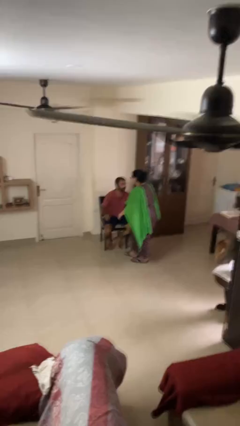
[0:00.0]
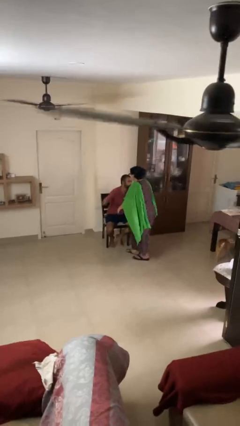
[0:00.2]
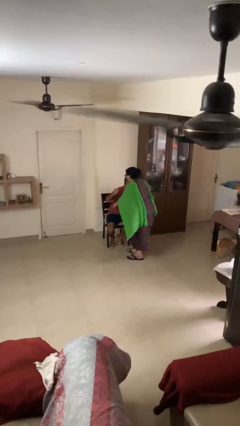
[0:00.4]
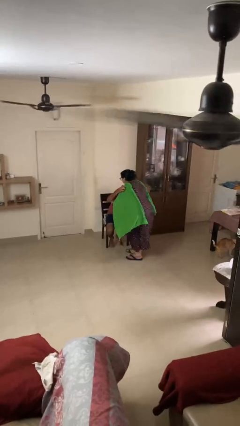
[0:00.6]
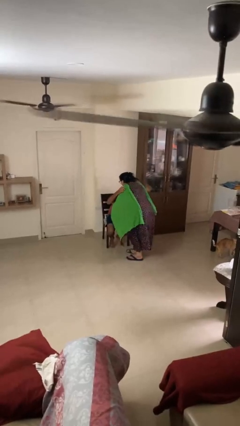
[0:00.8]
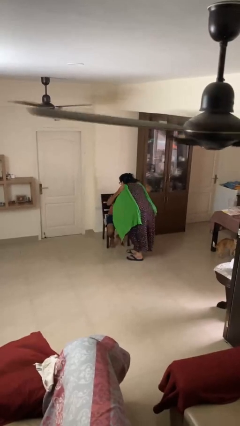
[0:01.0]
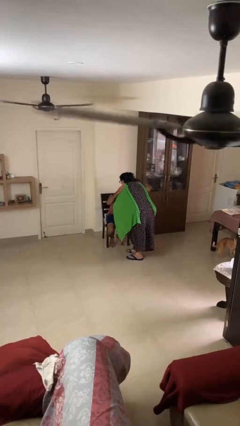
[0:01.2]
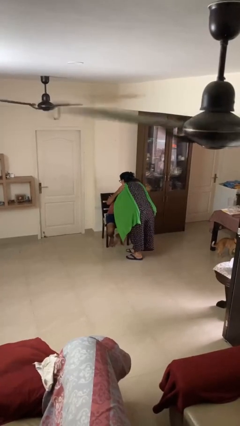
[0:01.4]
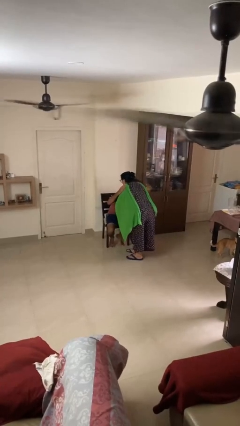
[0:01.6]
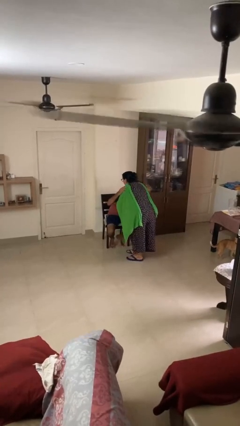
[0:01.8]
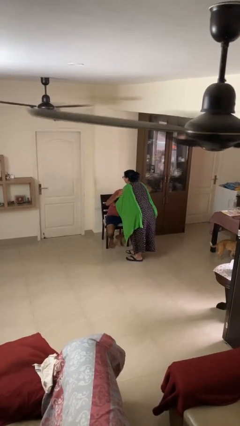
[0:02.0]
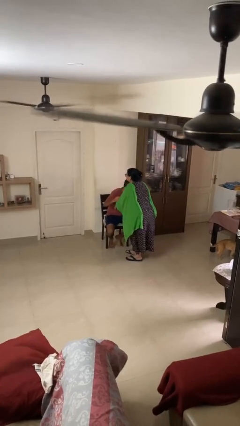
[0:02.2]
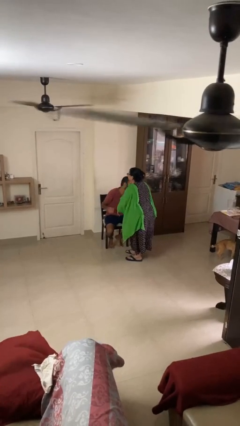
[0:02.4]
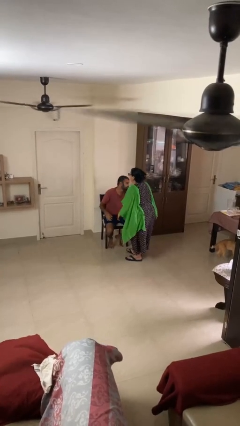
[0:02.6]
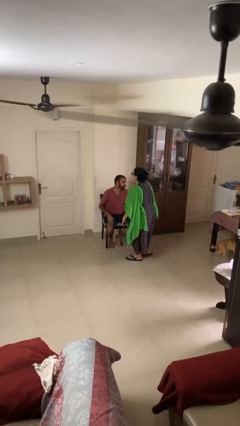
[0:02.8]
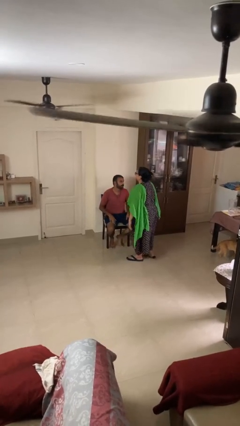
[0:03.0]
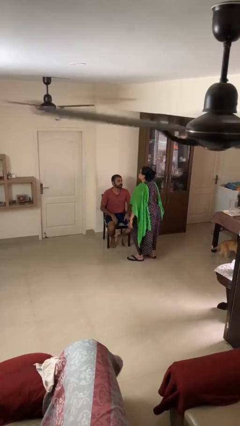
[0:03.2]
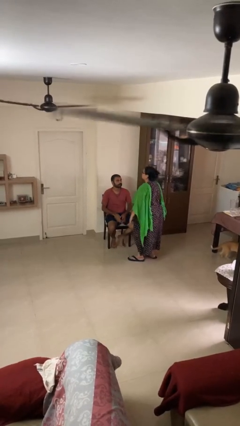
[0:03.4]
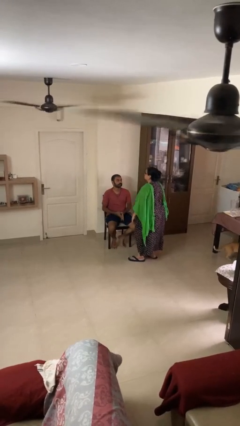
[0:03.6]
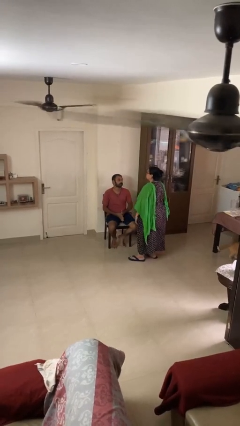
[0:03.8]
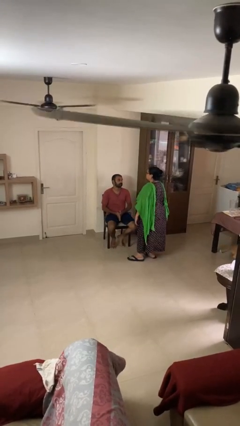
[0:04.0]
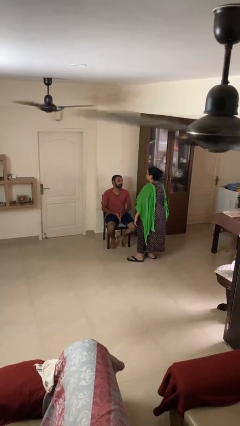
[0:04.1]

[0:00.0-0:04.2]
person embraces person

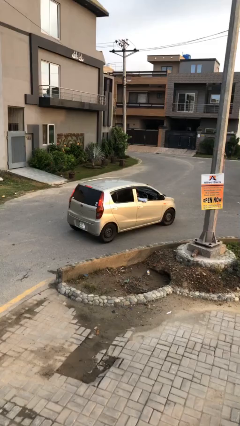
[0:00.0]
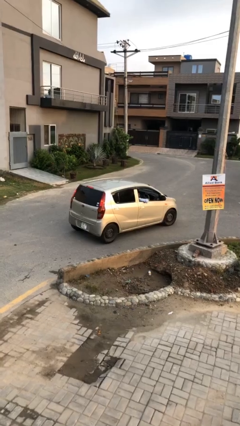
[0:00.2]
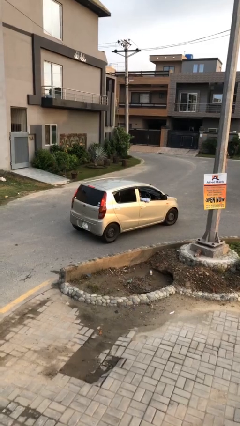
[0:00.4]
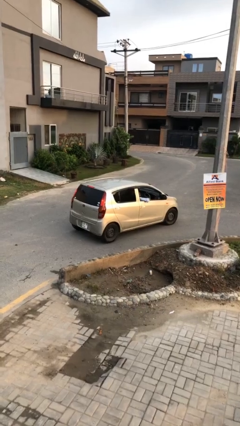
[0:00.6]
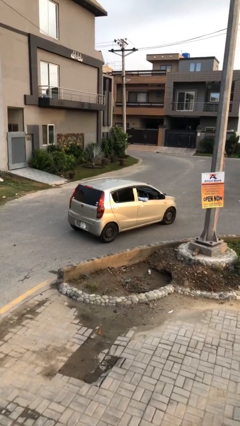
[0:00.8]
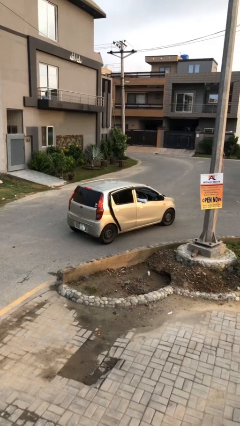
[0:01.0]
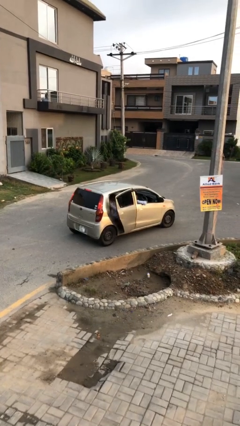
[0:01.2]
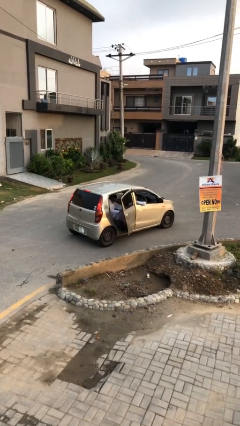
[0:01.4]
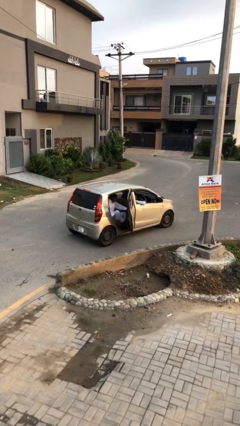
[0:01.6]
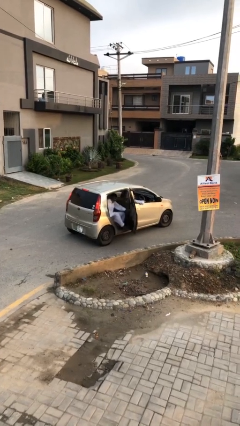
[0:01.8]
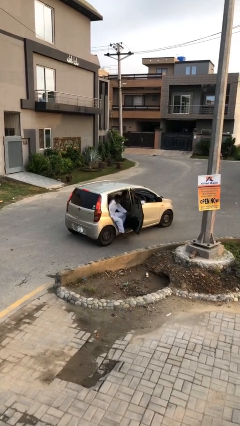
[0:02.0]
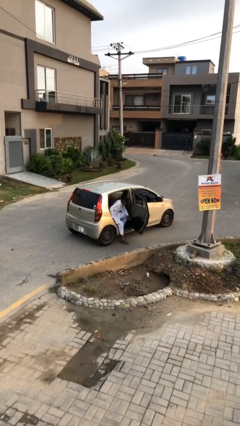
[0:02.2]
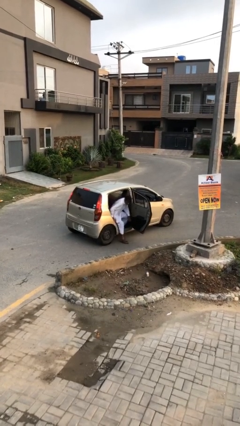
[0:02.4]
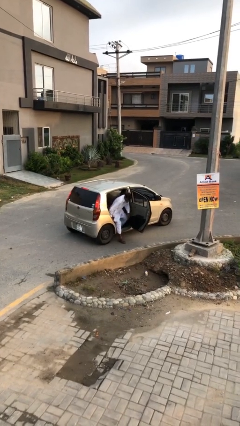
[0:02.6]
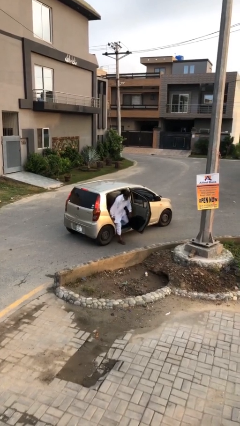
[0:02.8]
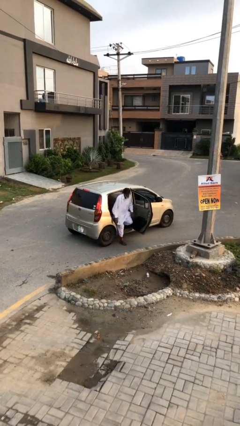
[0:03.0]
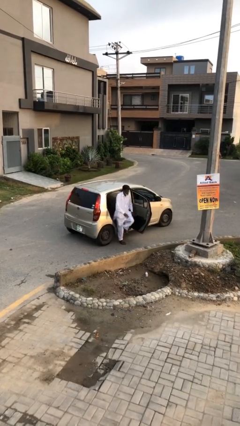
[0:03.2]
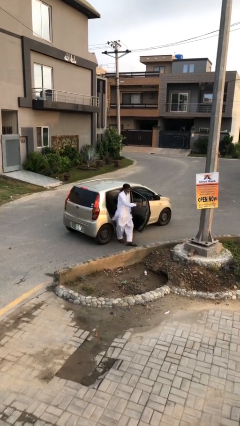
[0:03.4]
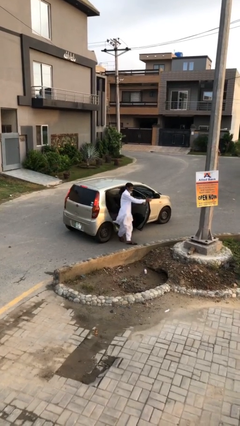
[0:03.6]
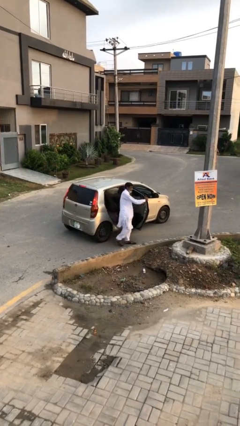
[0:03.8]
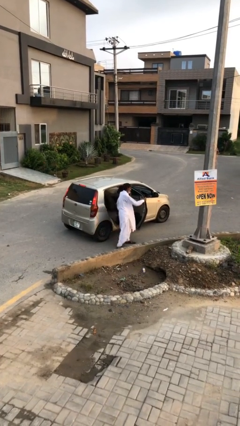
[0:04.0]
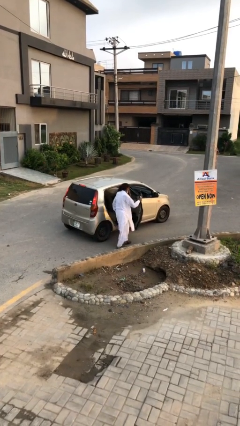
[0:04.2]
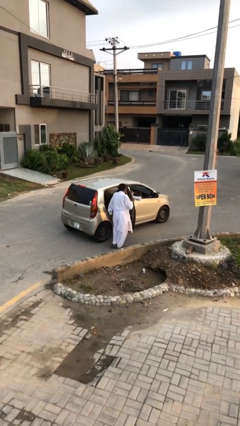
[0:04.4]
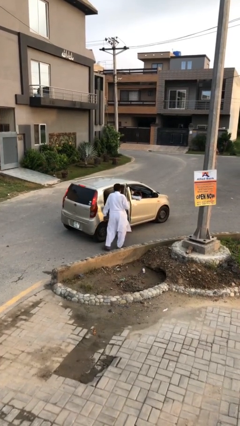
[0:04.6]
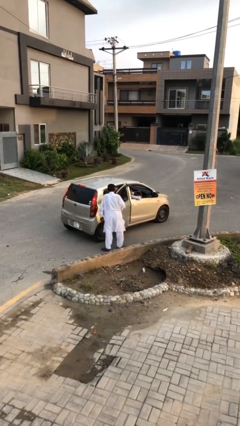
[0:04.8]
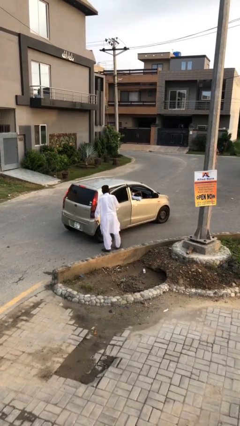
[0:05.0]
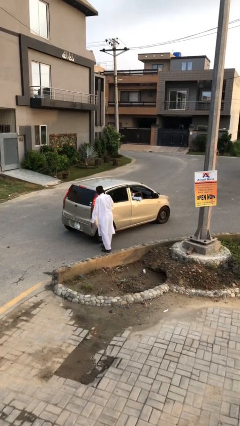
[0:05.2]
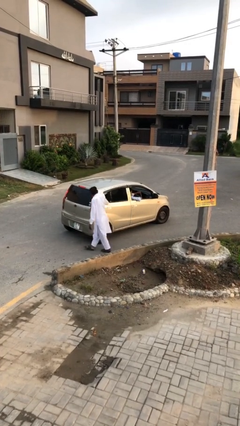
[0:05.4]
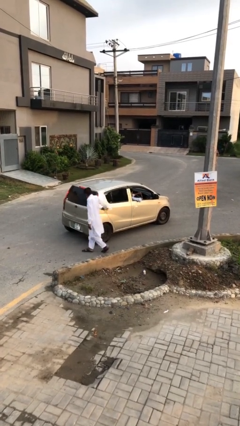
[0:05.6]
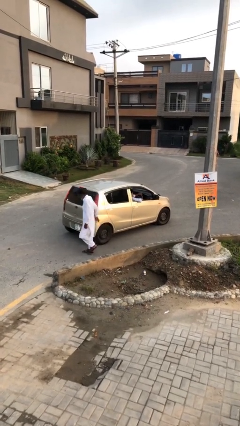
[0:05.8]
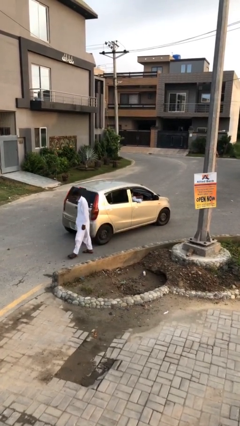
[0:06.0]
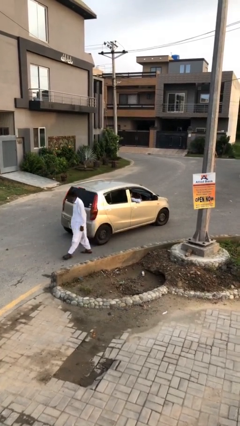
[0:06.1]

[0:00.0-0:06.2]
car drops off person

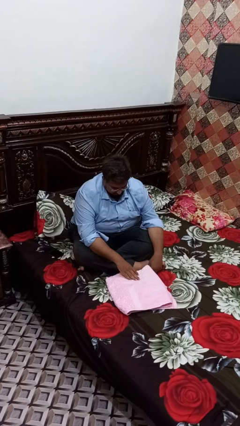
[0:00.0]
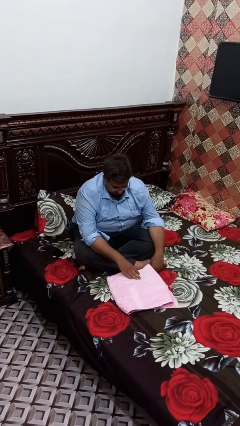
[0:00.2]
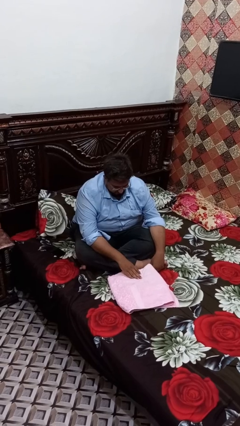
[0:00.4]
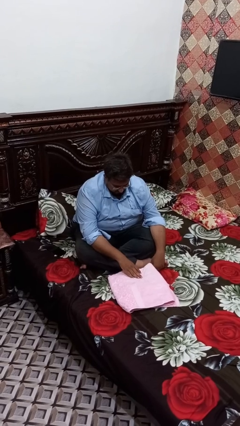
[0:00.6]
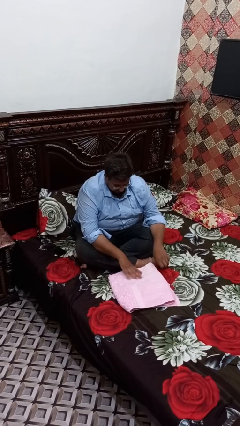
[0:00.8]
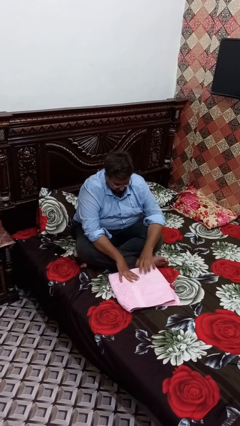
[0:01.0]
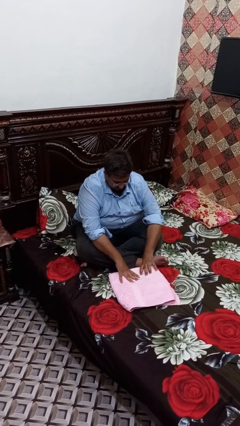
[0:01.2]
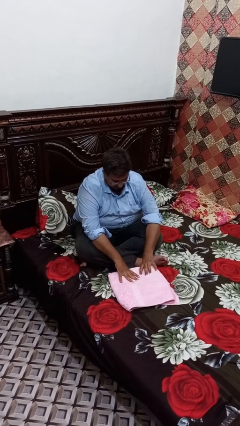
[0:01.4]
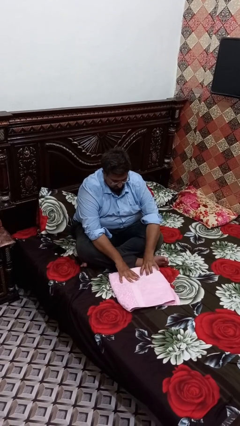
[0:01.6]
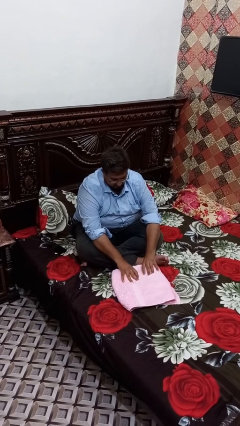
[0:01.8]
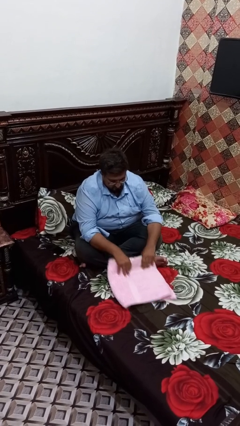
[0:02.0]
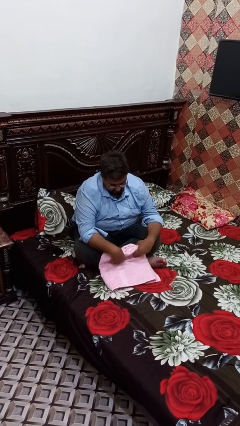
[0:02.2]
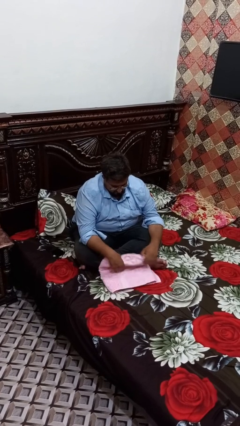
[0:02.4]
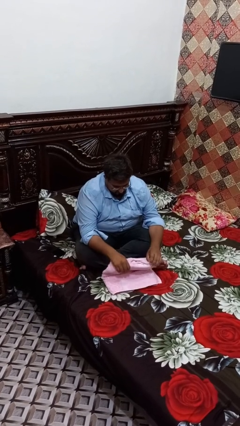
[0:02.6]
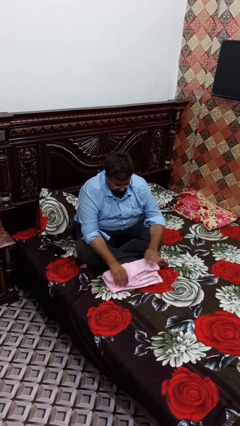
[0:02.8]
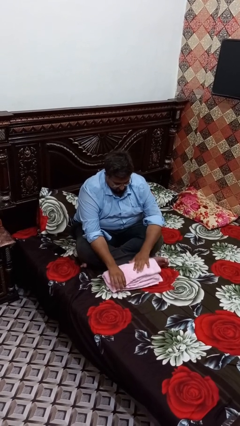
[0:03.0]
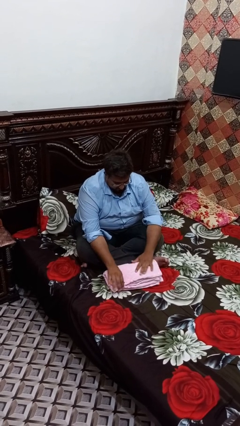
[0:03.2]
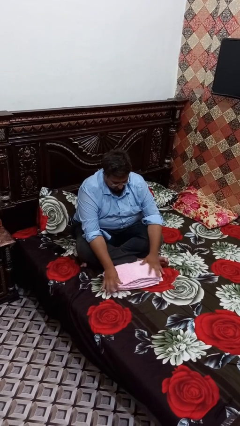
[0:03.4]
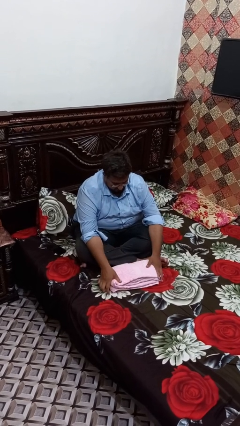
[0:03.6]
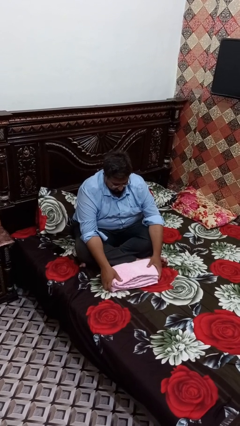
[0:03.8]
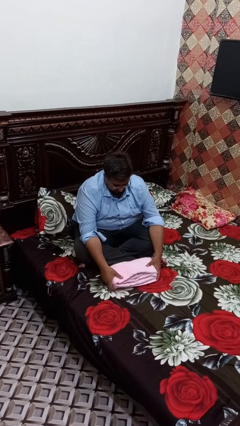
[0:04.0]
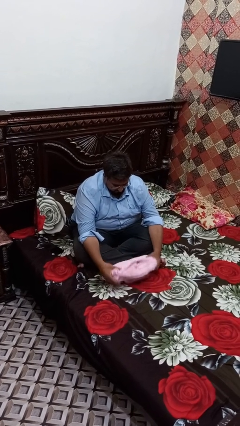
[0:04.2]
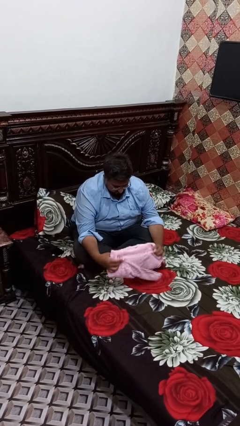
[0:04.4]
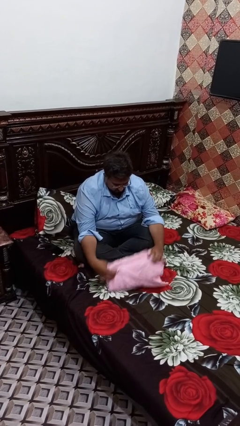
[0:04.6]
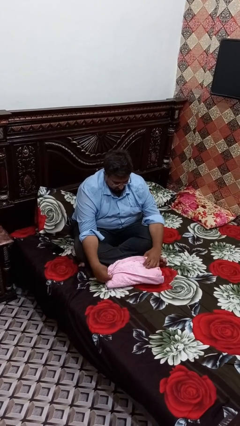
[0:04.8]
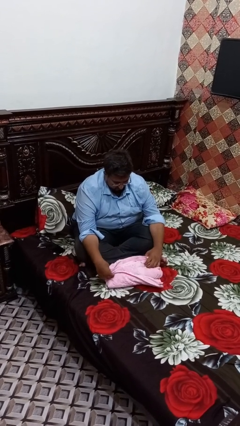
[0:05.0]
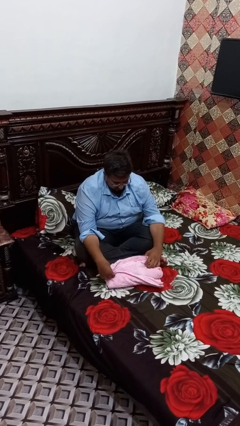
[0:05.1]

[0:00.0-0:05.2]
person folds towel

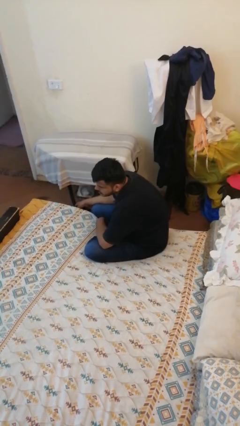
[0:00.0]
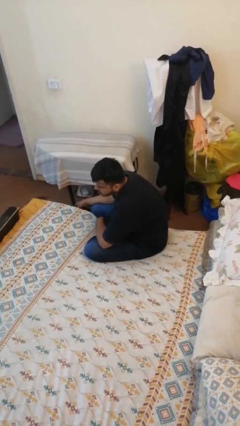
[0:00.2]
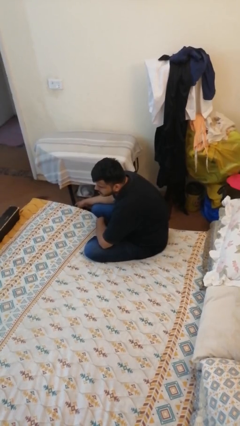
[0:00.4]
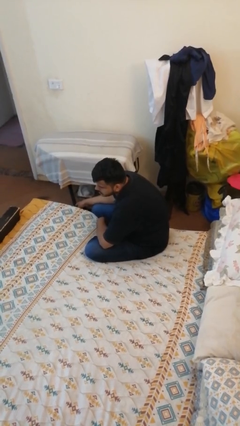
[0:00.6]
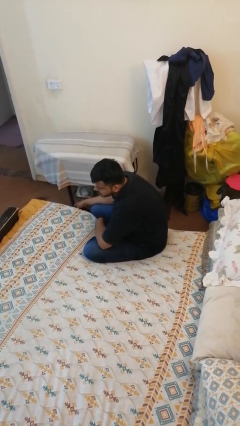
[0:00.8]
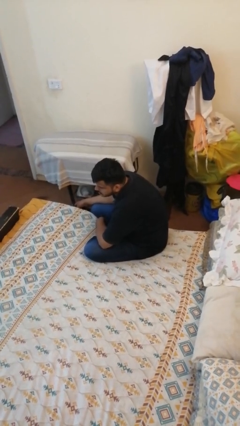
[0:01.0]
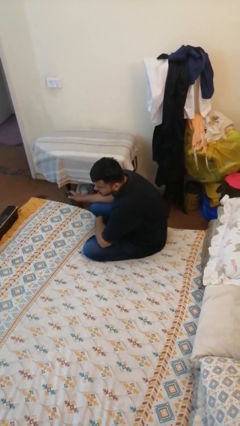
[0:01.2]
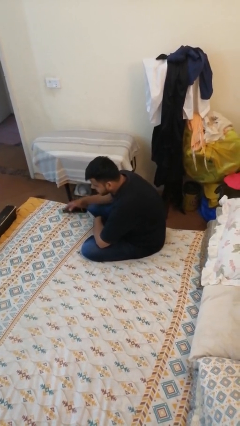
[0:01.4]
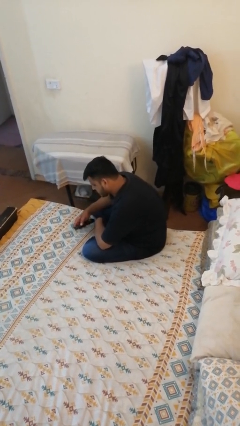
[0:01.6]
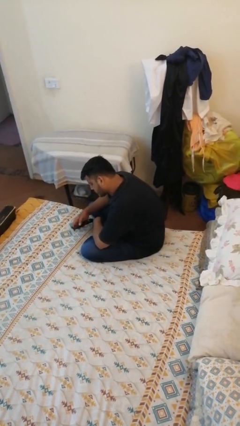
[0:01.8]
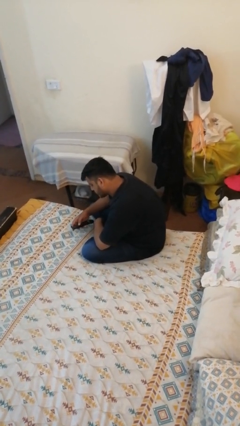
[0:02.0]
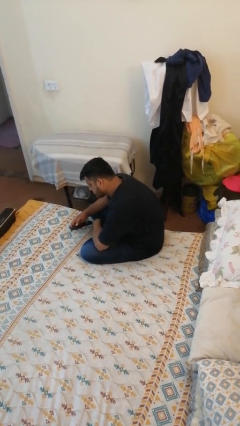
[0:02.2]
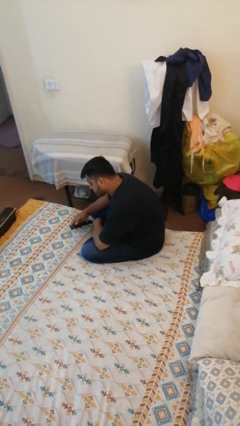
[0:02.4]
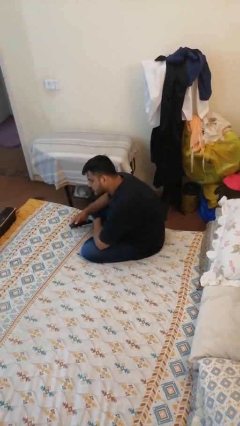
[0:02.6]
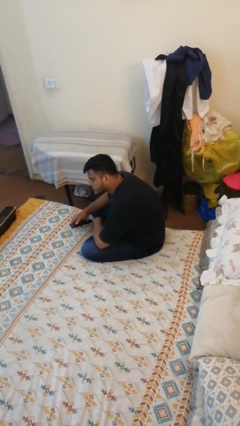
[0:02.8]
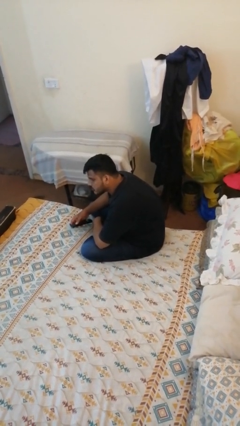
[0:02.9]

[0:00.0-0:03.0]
person uses television remote
